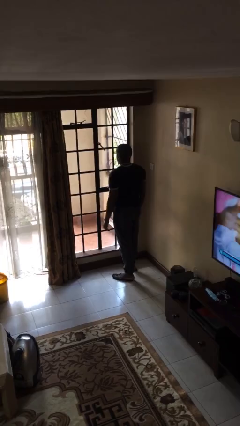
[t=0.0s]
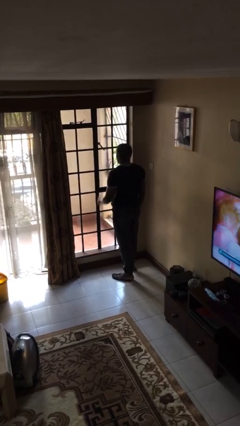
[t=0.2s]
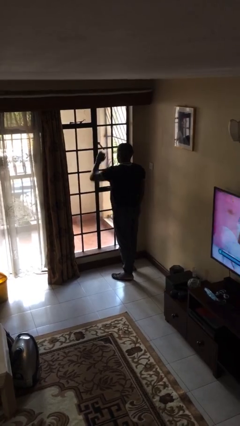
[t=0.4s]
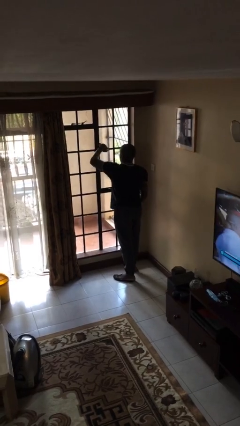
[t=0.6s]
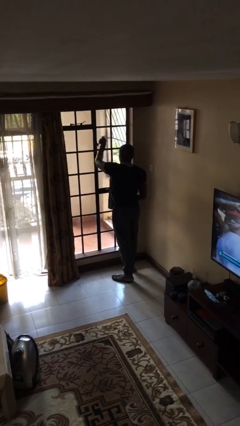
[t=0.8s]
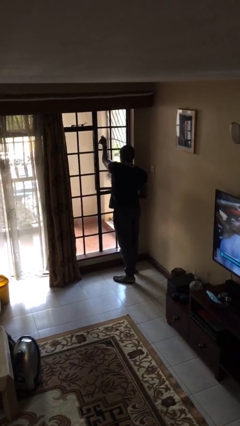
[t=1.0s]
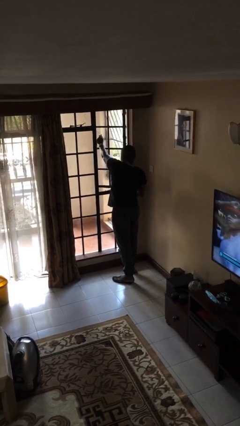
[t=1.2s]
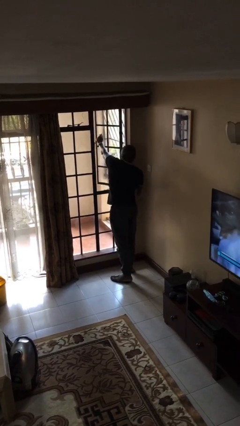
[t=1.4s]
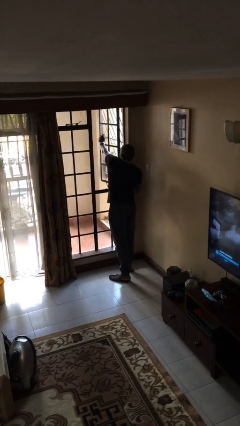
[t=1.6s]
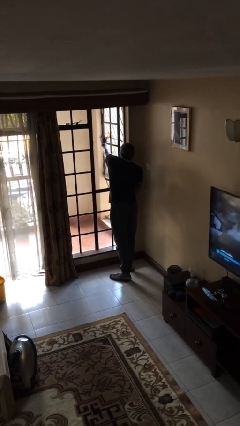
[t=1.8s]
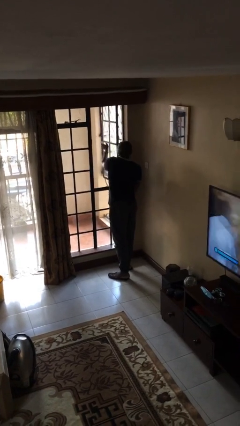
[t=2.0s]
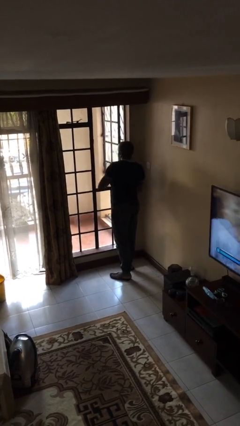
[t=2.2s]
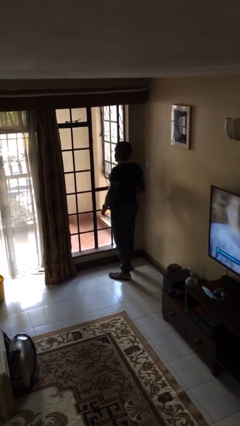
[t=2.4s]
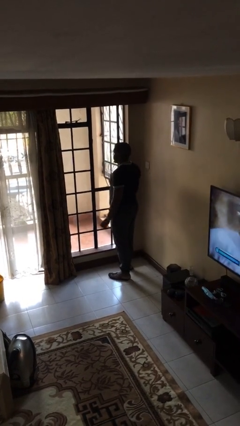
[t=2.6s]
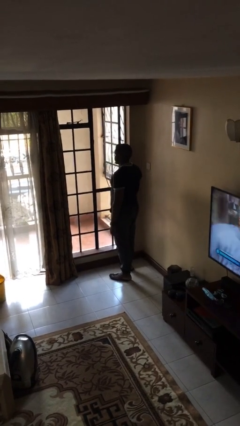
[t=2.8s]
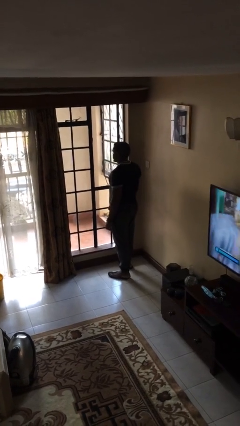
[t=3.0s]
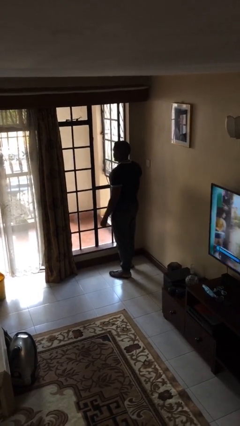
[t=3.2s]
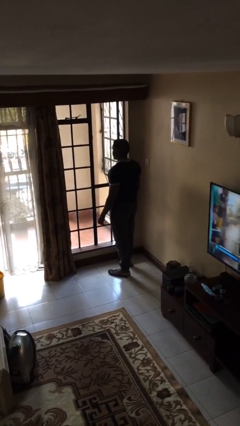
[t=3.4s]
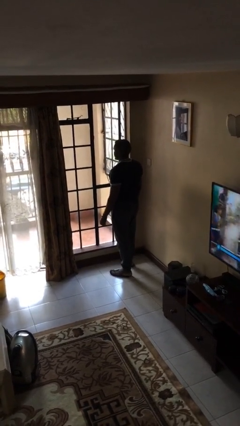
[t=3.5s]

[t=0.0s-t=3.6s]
person opens home window

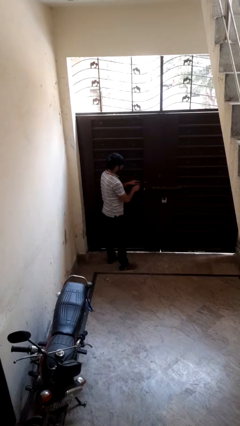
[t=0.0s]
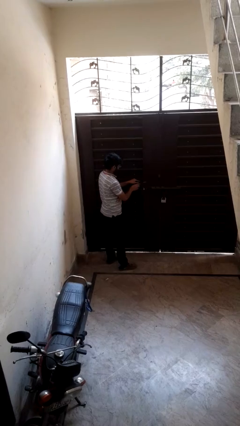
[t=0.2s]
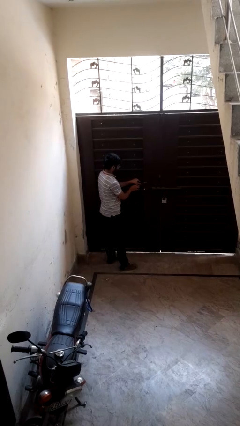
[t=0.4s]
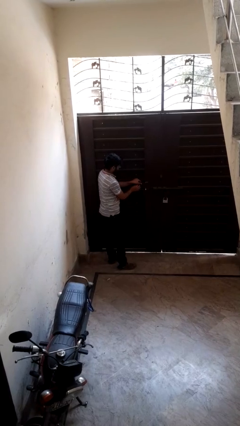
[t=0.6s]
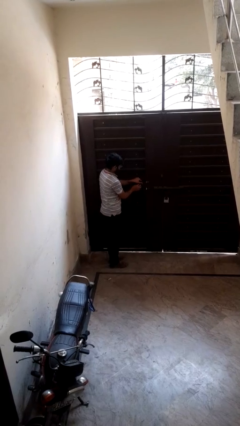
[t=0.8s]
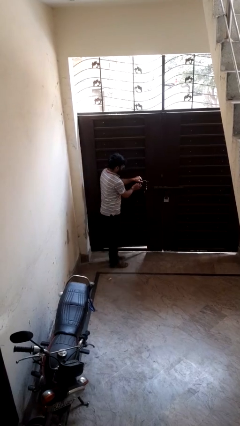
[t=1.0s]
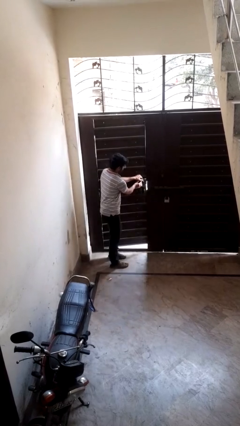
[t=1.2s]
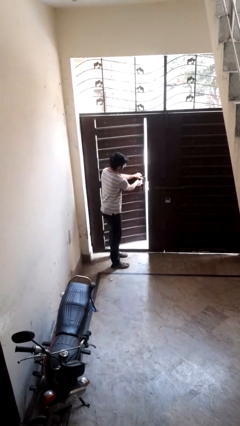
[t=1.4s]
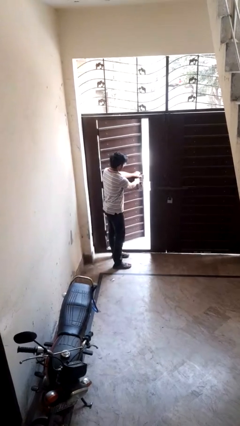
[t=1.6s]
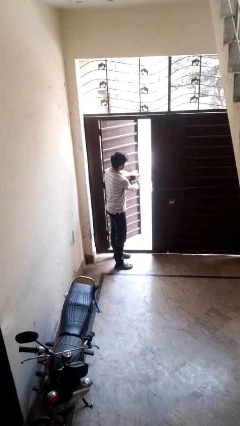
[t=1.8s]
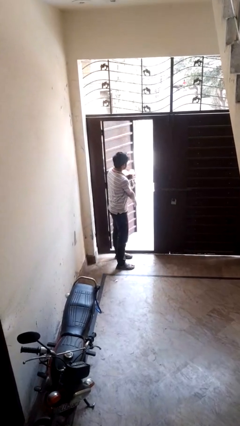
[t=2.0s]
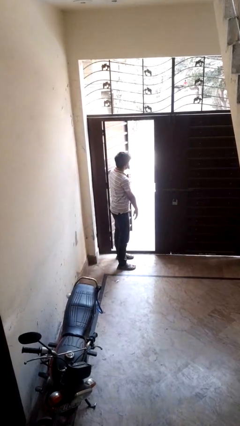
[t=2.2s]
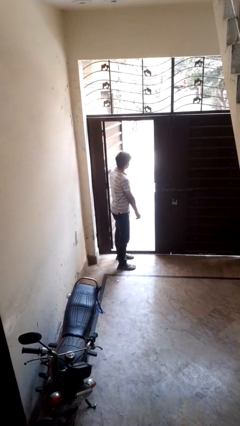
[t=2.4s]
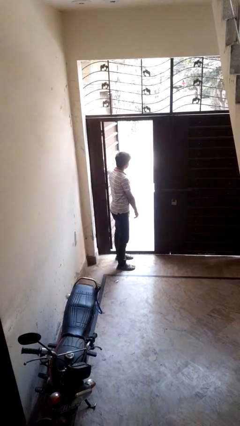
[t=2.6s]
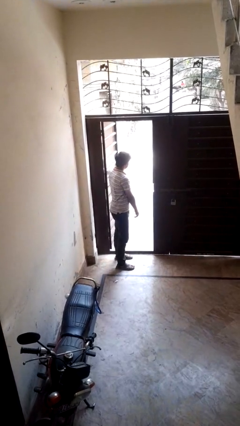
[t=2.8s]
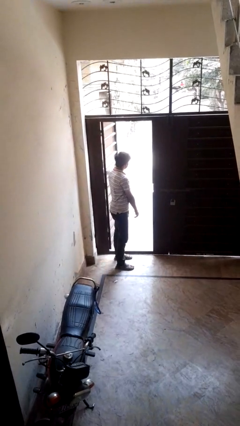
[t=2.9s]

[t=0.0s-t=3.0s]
person opens facility door

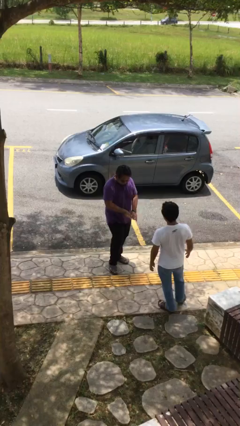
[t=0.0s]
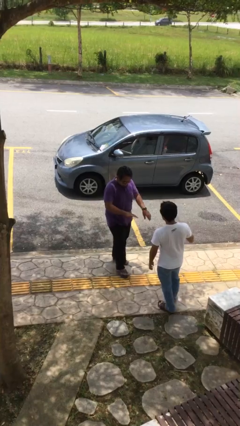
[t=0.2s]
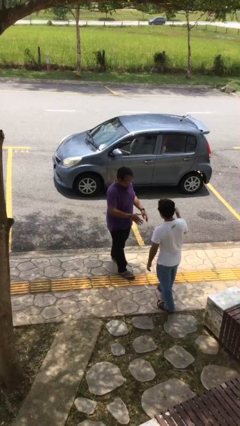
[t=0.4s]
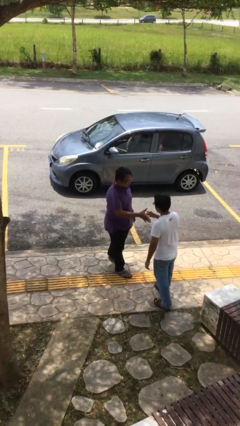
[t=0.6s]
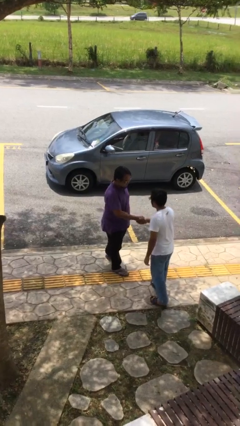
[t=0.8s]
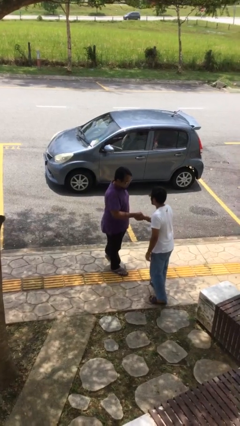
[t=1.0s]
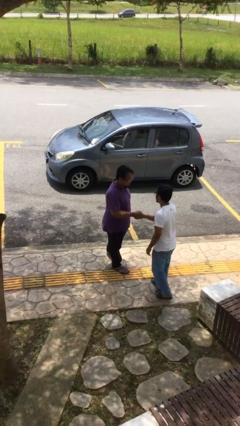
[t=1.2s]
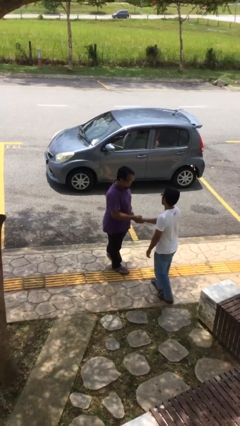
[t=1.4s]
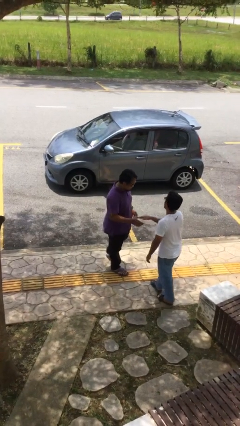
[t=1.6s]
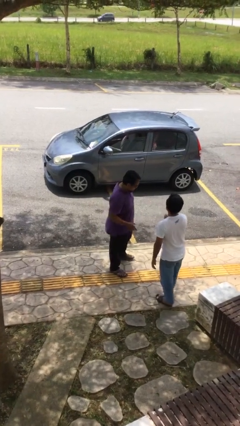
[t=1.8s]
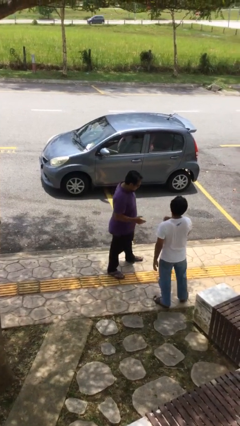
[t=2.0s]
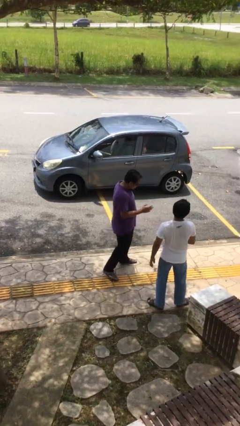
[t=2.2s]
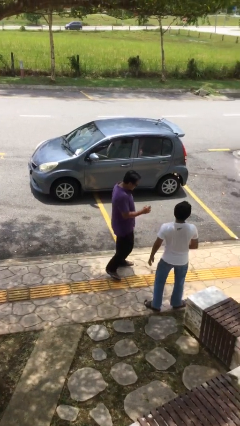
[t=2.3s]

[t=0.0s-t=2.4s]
person shakes hand

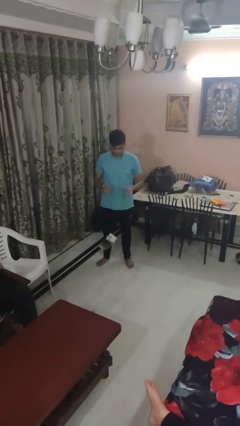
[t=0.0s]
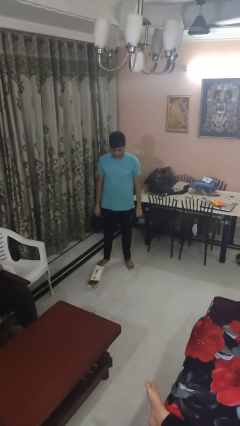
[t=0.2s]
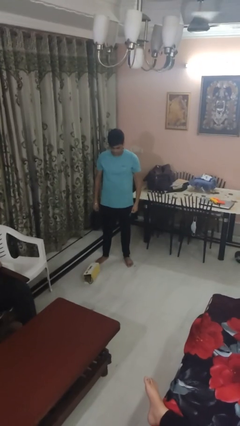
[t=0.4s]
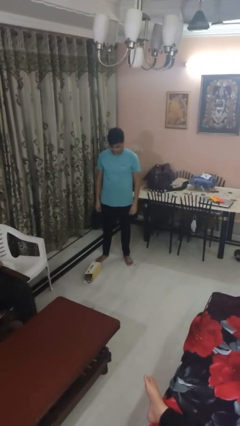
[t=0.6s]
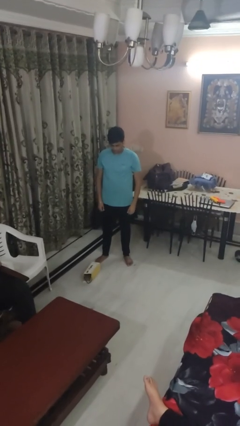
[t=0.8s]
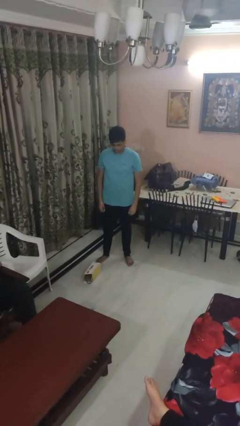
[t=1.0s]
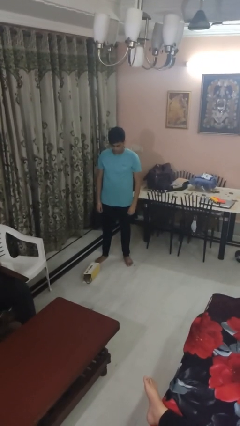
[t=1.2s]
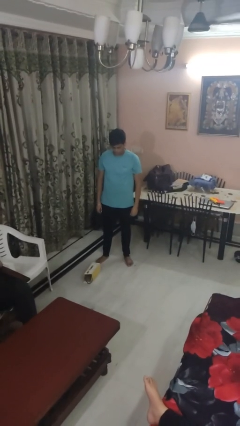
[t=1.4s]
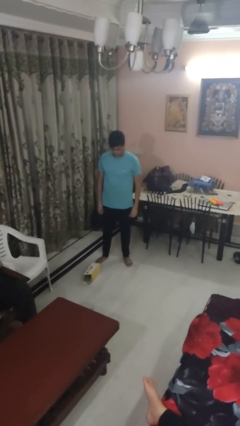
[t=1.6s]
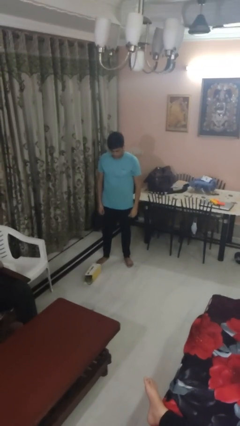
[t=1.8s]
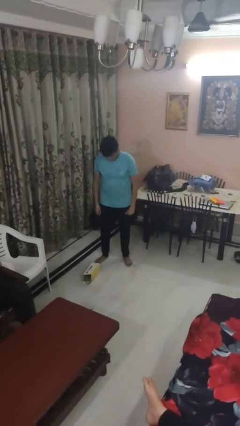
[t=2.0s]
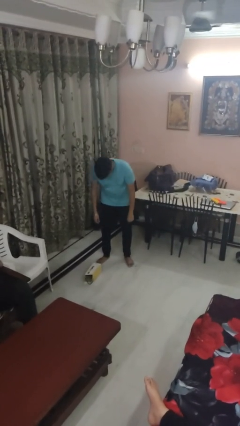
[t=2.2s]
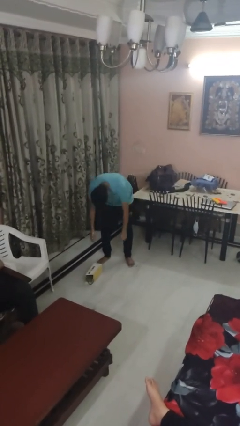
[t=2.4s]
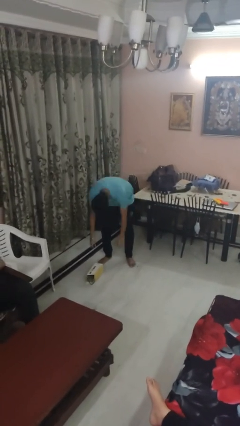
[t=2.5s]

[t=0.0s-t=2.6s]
person drops object

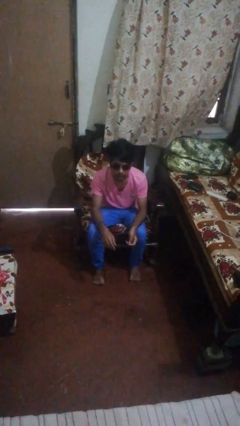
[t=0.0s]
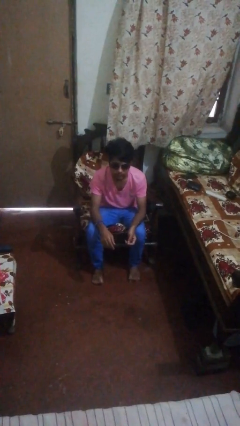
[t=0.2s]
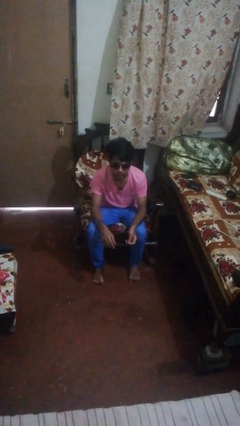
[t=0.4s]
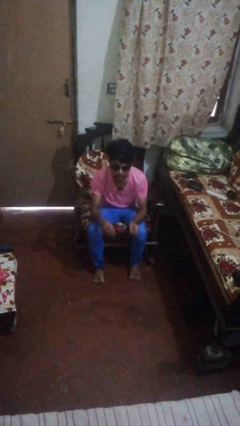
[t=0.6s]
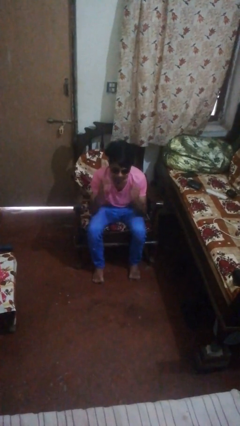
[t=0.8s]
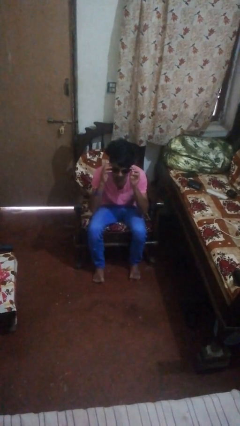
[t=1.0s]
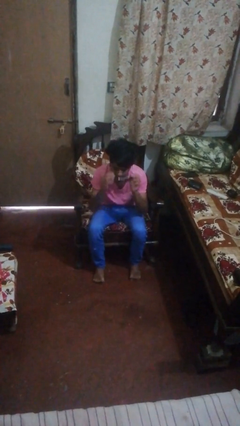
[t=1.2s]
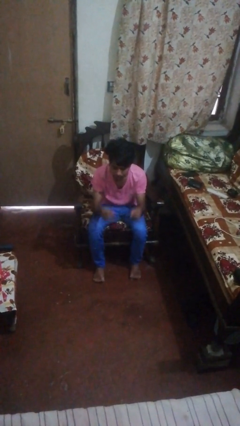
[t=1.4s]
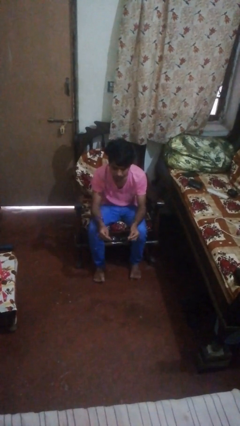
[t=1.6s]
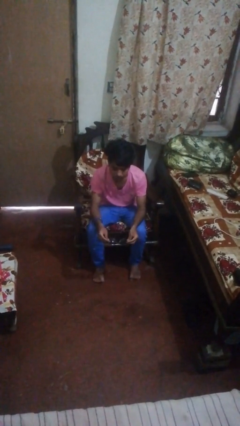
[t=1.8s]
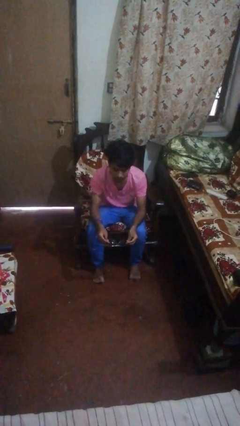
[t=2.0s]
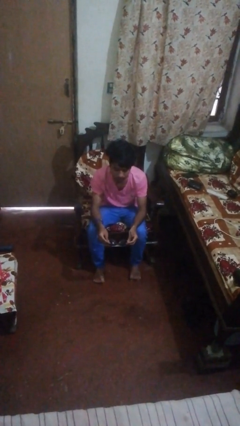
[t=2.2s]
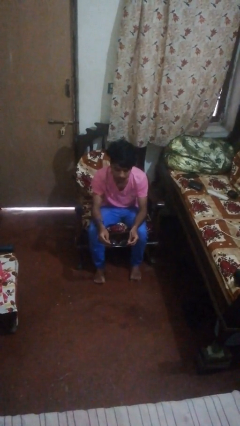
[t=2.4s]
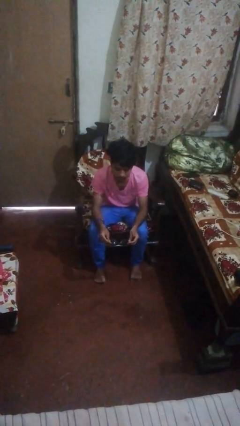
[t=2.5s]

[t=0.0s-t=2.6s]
person takes off sunglasses

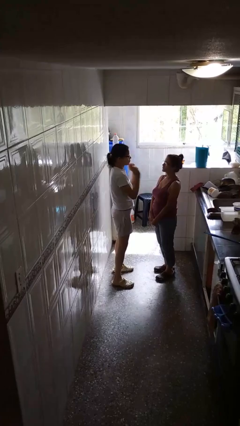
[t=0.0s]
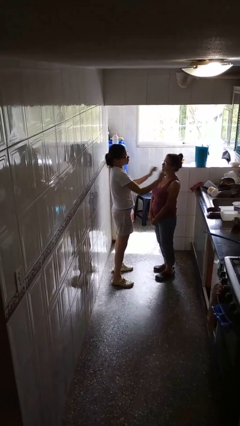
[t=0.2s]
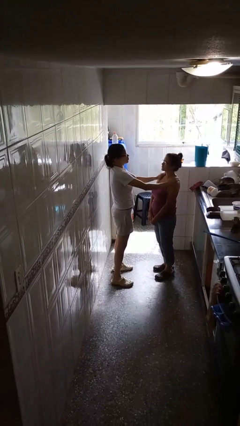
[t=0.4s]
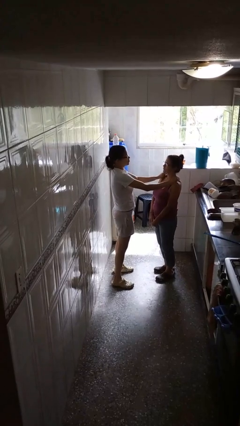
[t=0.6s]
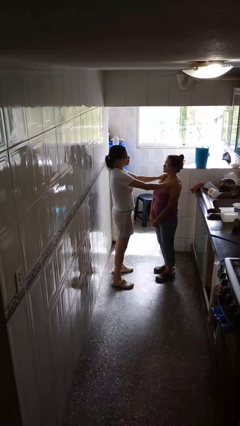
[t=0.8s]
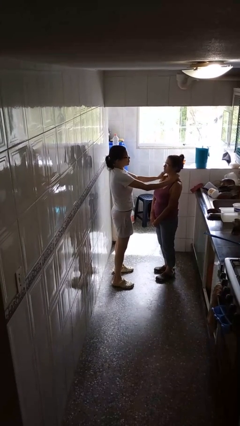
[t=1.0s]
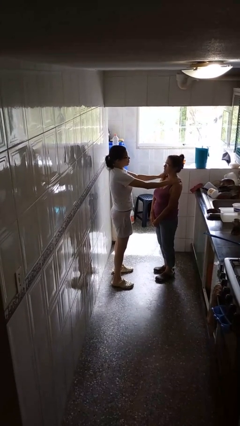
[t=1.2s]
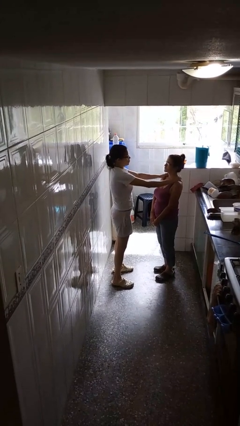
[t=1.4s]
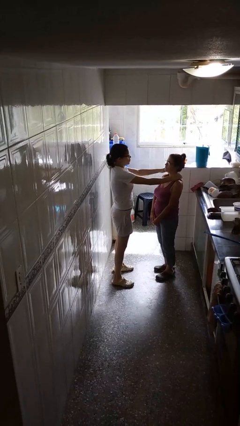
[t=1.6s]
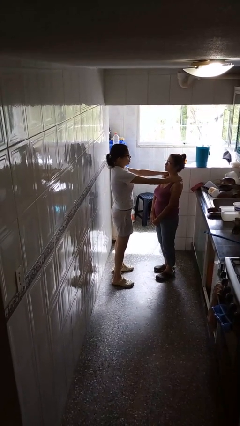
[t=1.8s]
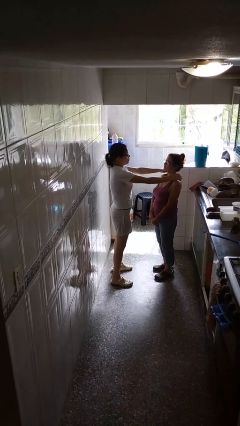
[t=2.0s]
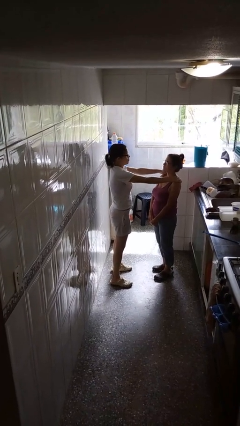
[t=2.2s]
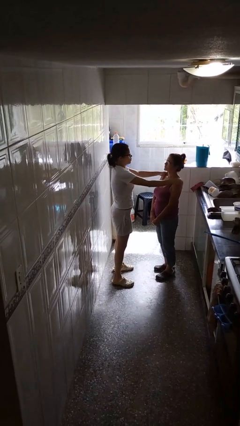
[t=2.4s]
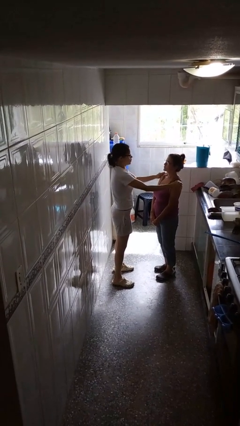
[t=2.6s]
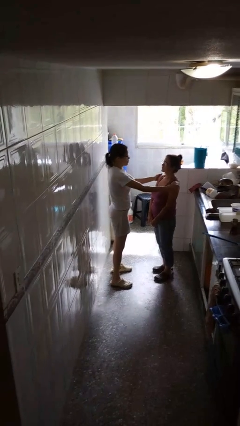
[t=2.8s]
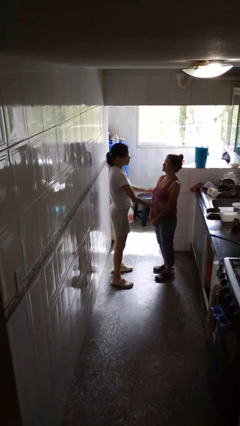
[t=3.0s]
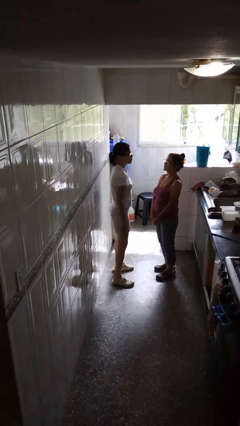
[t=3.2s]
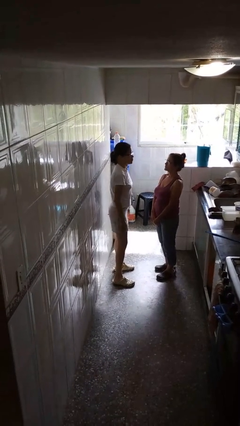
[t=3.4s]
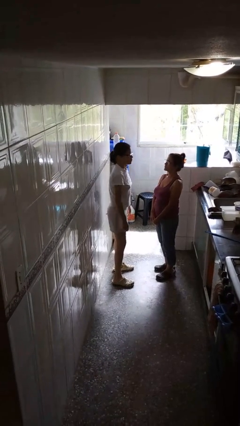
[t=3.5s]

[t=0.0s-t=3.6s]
person pounds shoulders of person
